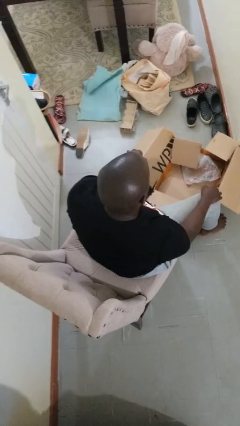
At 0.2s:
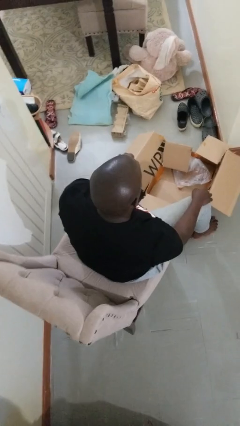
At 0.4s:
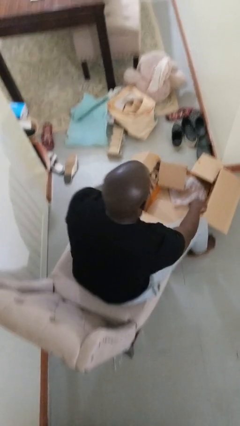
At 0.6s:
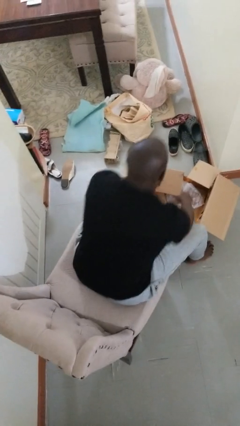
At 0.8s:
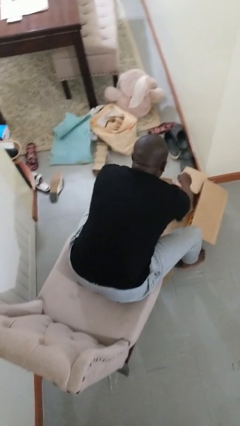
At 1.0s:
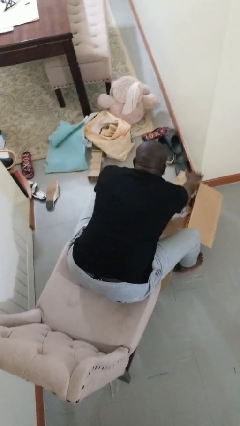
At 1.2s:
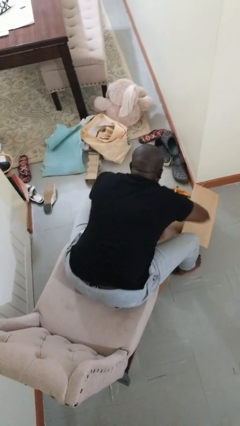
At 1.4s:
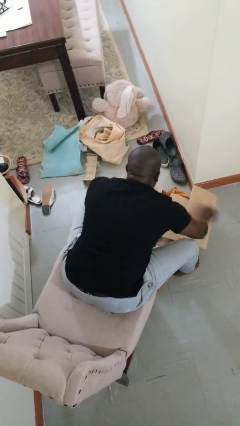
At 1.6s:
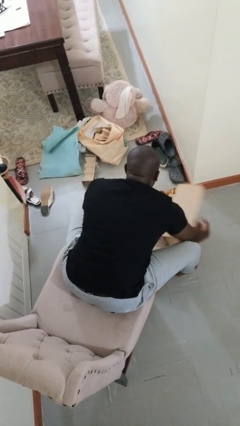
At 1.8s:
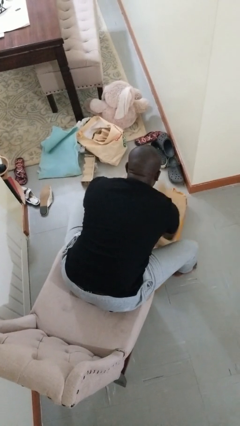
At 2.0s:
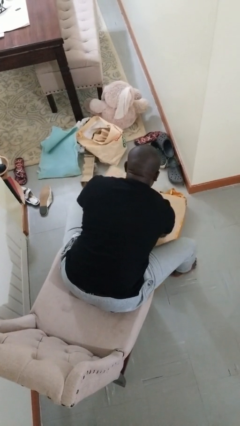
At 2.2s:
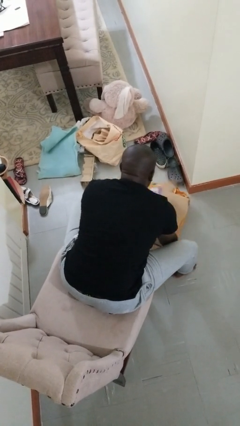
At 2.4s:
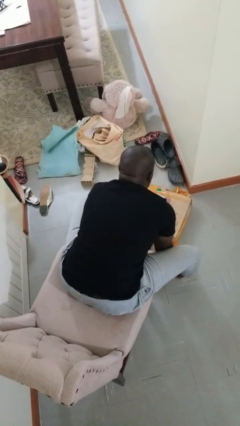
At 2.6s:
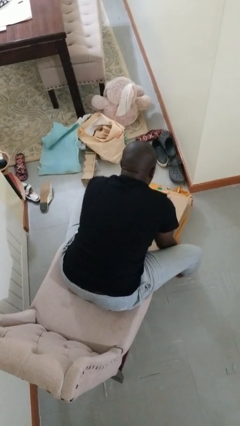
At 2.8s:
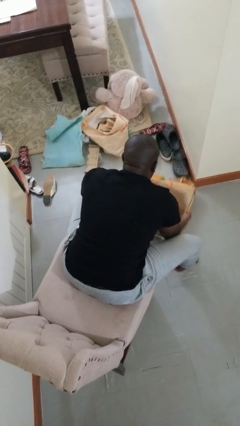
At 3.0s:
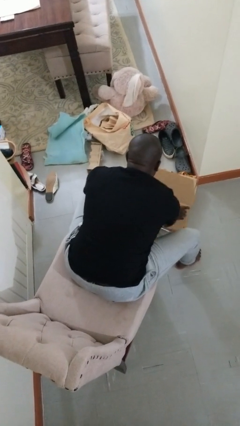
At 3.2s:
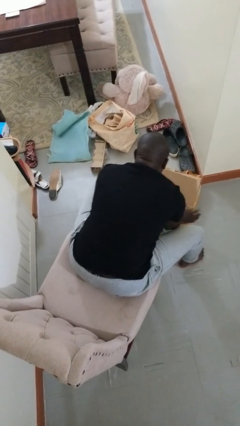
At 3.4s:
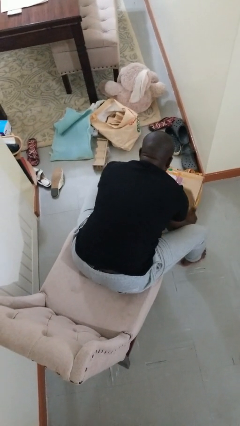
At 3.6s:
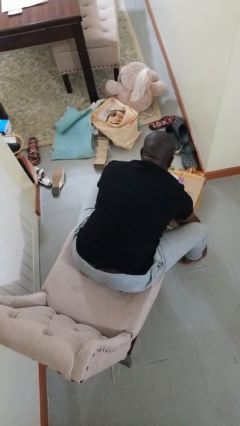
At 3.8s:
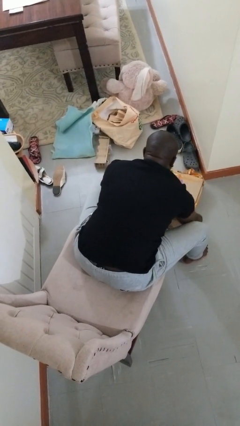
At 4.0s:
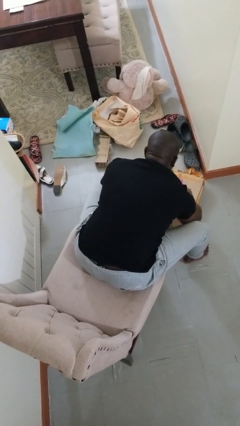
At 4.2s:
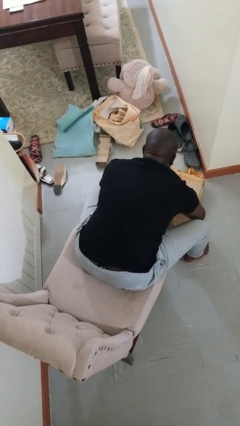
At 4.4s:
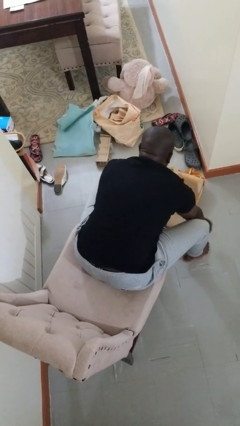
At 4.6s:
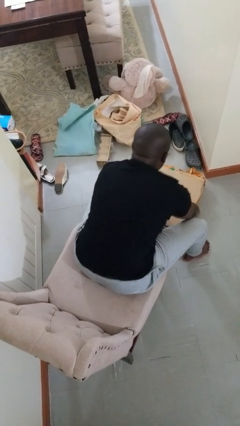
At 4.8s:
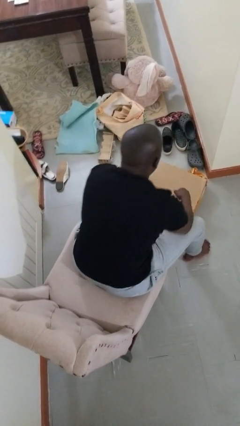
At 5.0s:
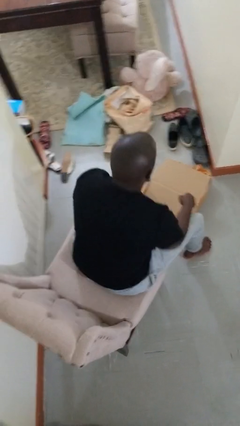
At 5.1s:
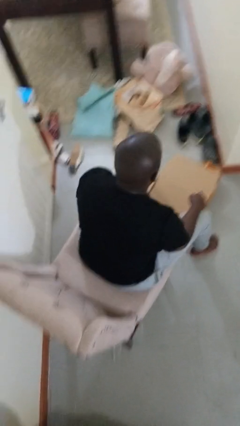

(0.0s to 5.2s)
person closes box

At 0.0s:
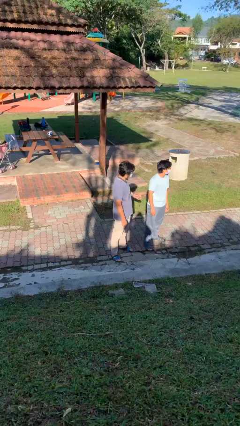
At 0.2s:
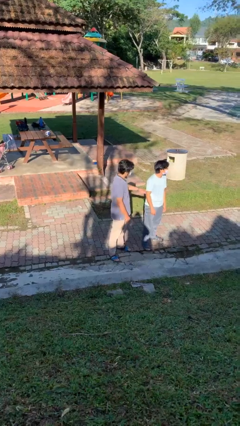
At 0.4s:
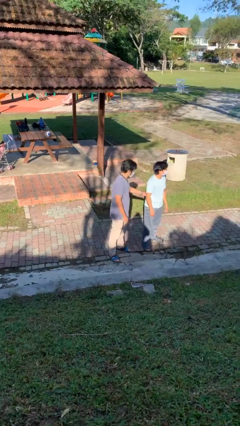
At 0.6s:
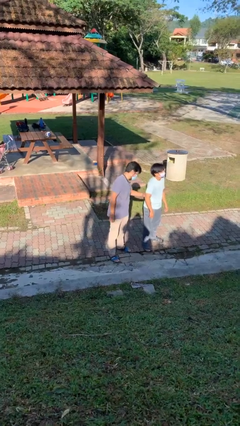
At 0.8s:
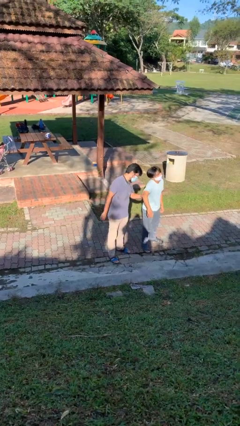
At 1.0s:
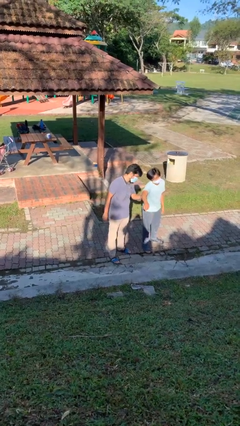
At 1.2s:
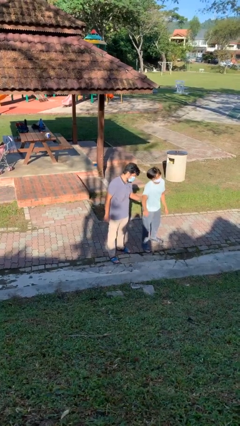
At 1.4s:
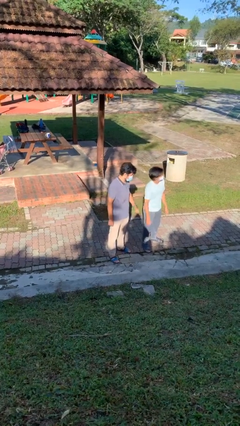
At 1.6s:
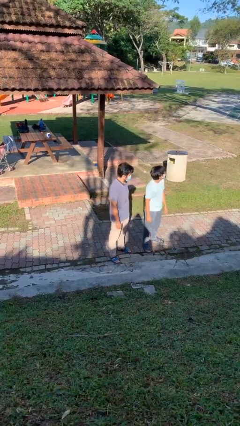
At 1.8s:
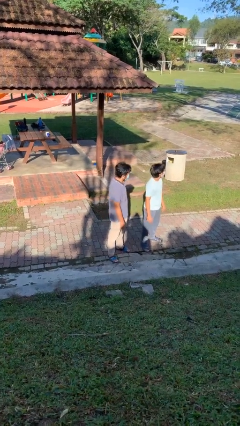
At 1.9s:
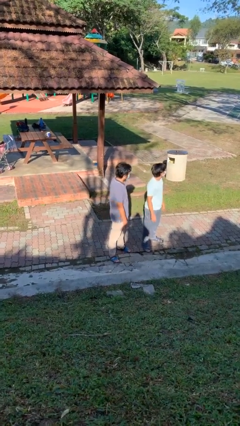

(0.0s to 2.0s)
person grabs person by bicep

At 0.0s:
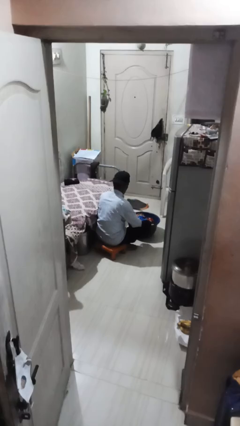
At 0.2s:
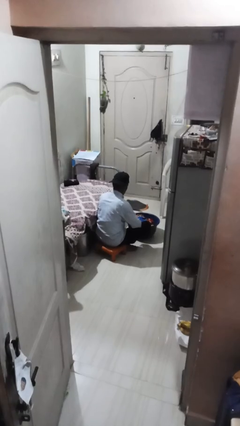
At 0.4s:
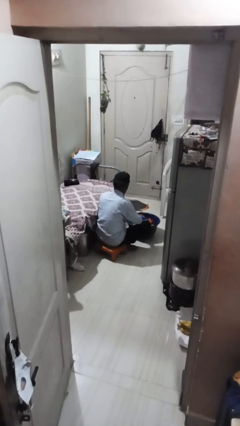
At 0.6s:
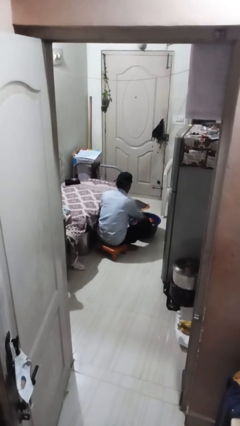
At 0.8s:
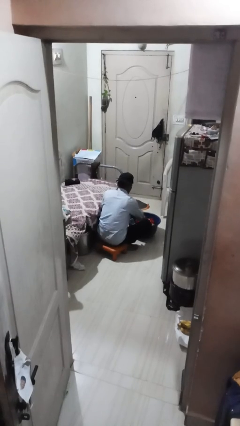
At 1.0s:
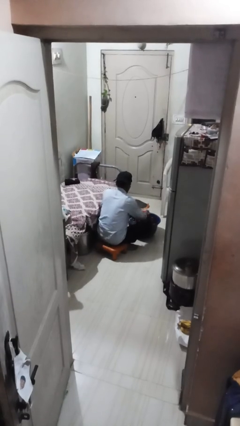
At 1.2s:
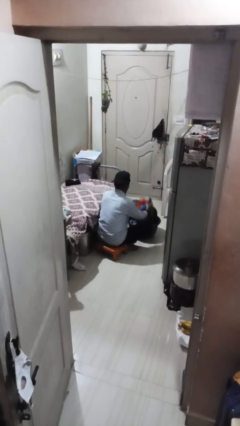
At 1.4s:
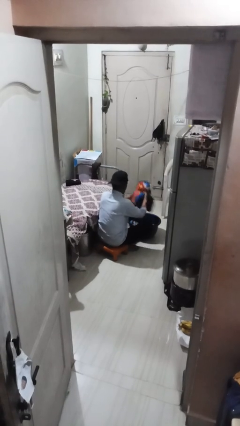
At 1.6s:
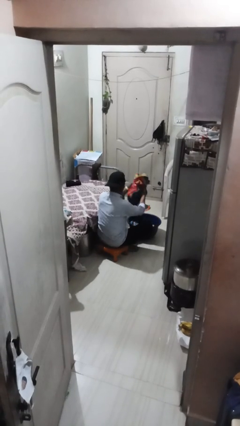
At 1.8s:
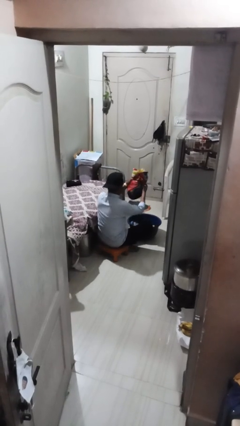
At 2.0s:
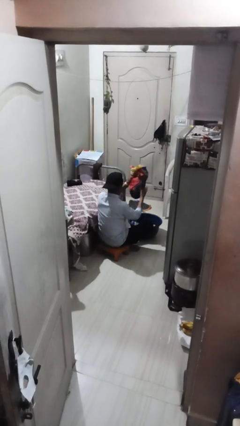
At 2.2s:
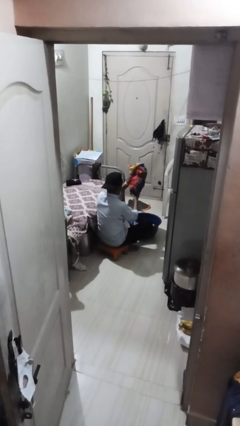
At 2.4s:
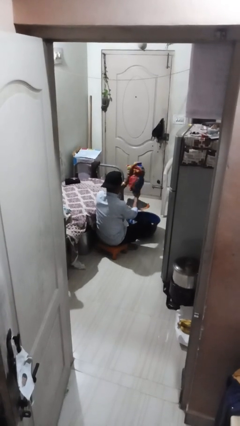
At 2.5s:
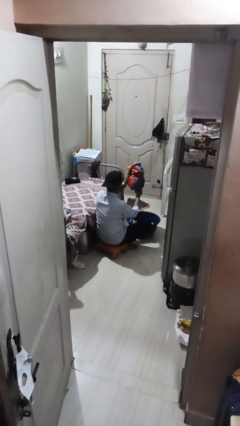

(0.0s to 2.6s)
person takes object from basket

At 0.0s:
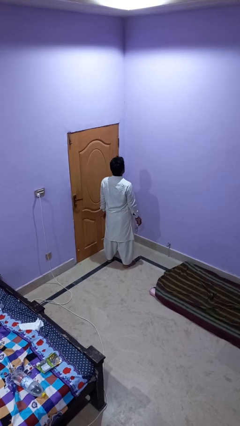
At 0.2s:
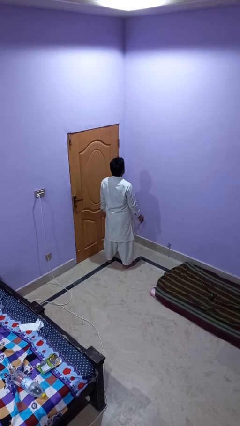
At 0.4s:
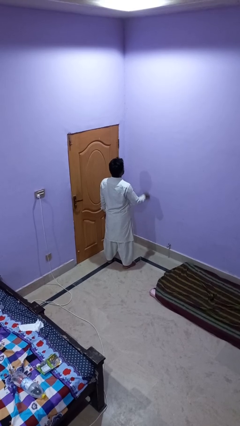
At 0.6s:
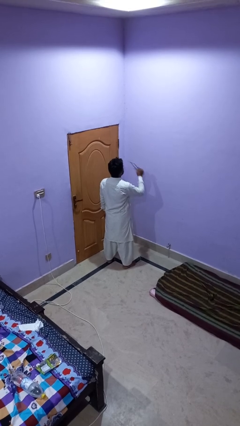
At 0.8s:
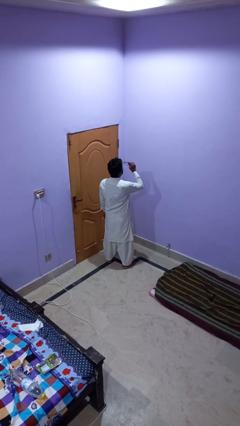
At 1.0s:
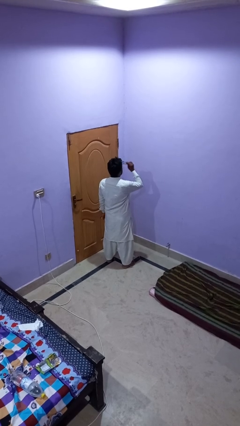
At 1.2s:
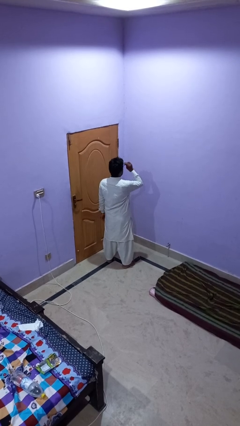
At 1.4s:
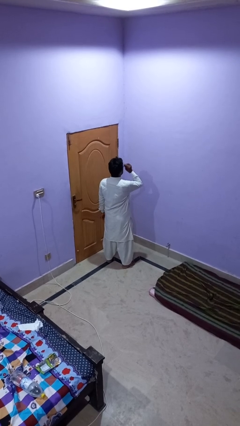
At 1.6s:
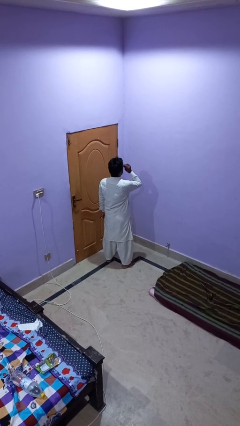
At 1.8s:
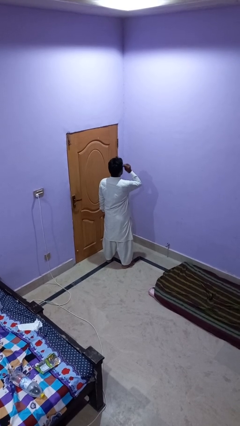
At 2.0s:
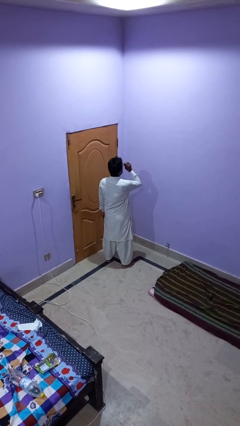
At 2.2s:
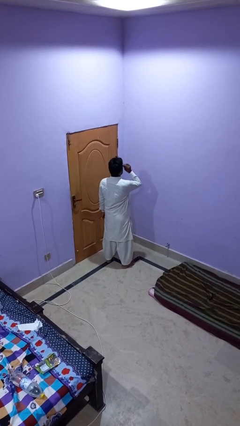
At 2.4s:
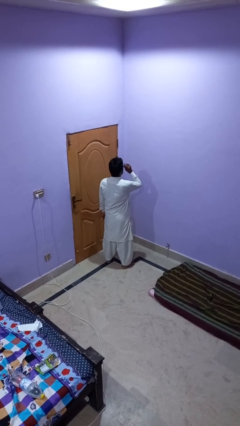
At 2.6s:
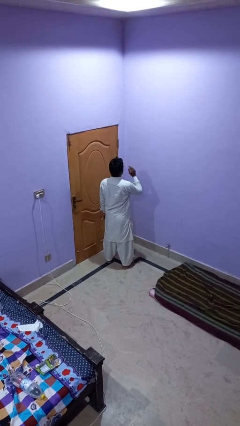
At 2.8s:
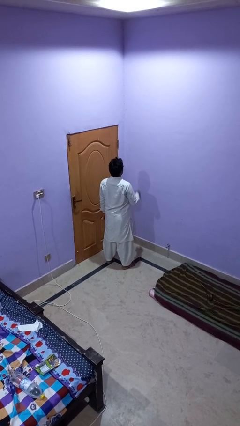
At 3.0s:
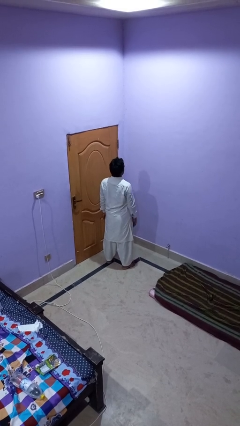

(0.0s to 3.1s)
person puts on glasses

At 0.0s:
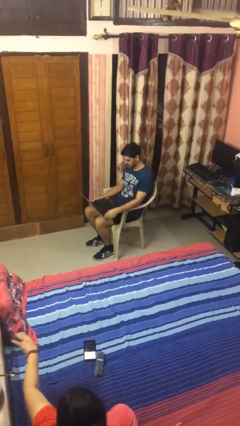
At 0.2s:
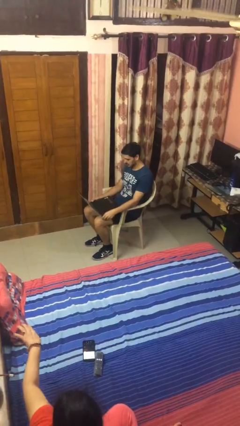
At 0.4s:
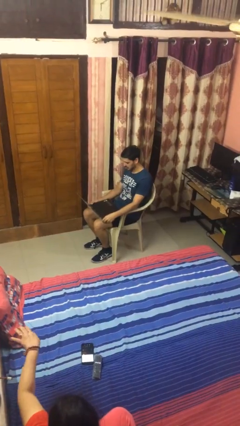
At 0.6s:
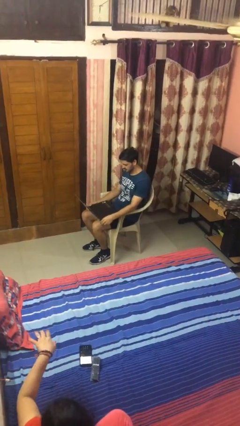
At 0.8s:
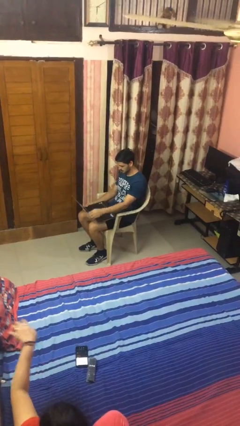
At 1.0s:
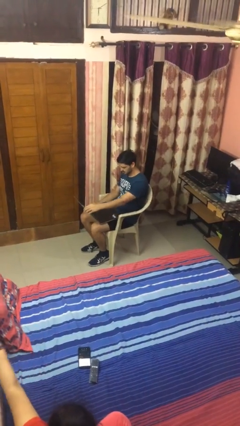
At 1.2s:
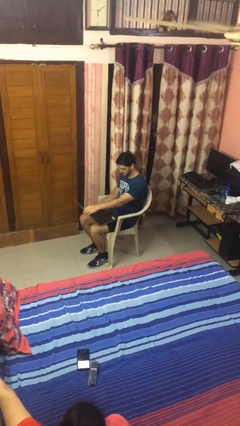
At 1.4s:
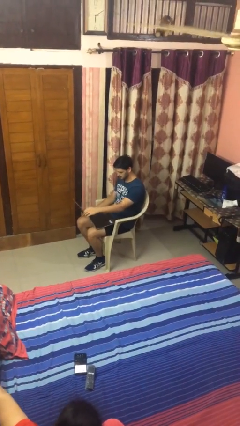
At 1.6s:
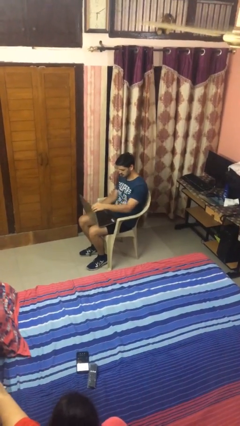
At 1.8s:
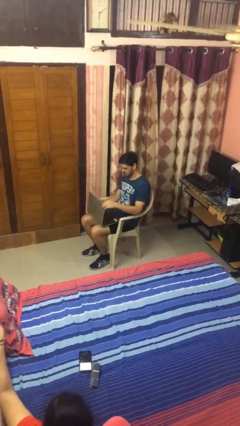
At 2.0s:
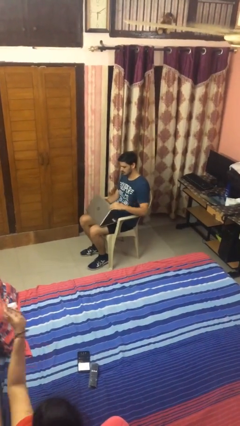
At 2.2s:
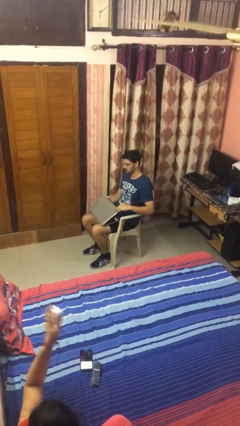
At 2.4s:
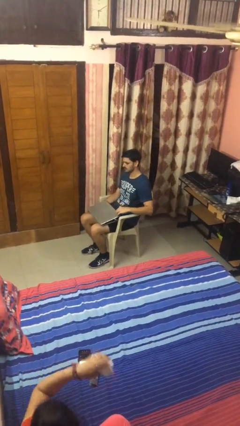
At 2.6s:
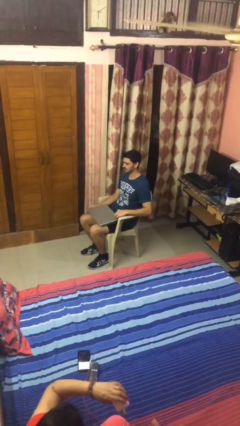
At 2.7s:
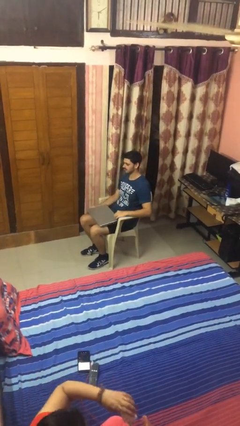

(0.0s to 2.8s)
person closes laptop

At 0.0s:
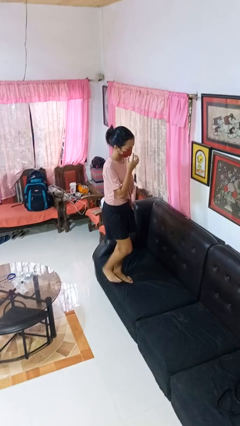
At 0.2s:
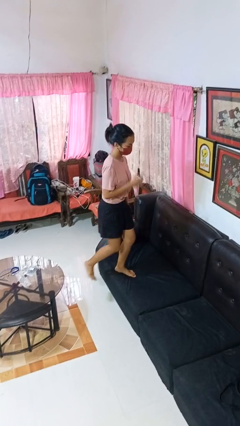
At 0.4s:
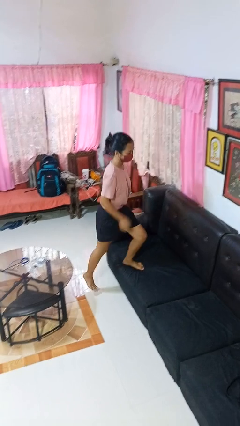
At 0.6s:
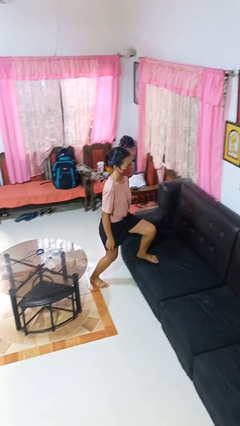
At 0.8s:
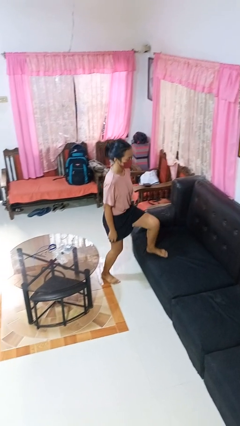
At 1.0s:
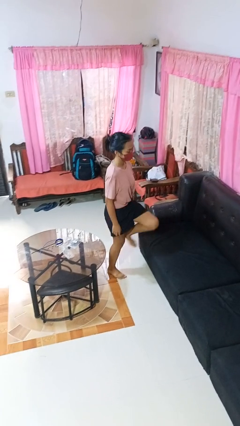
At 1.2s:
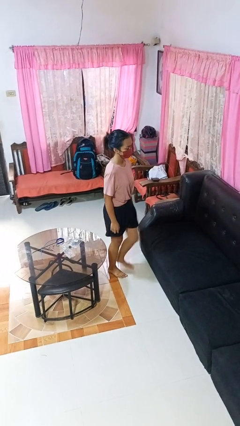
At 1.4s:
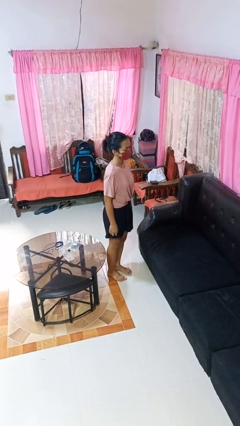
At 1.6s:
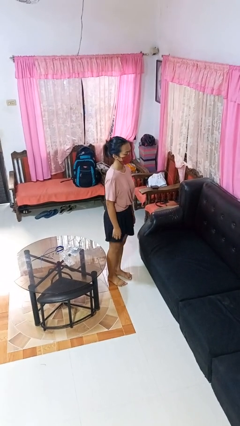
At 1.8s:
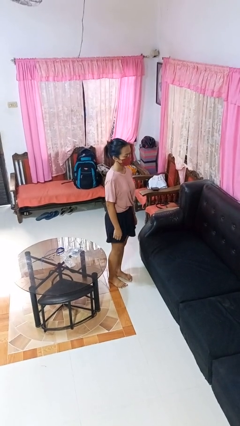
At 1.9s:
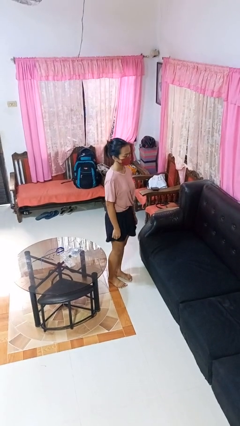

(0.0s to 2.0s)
person climbs off couch

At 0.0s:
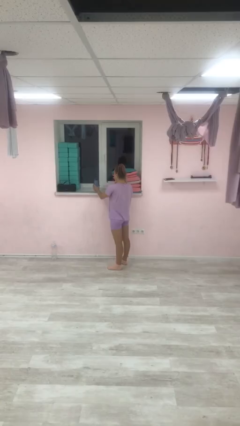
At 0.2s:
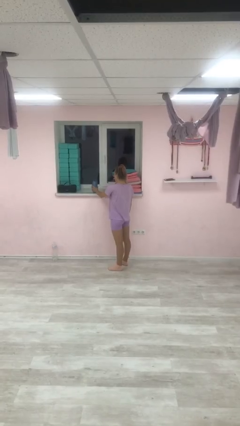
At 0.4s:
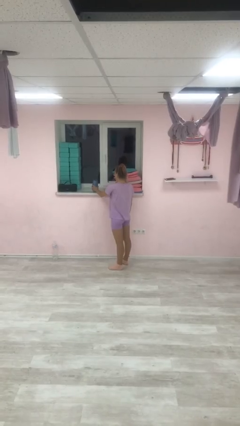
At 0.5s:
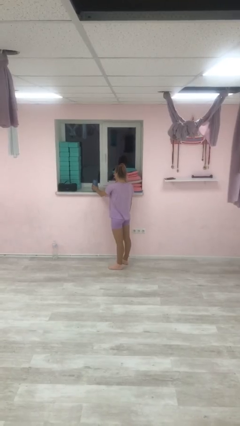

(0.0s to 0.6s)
person puts down object on countertop
